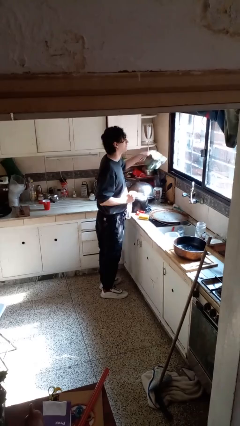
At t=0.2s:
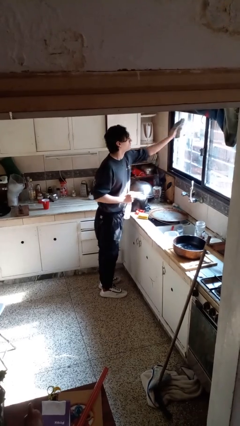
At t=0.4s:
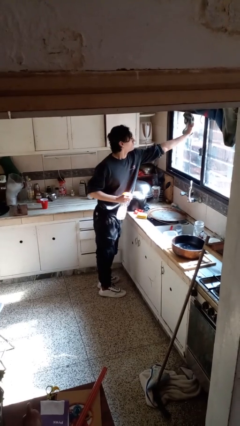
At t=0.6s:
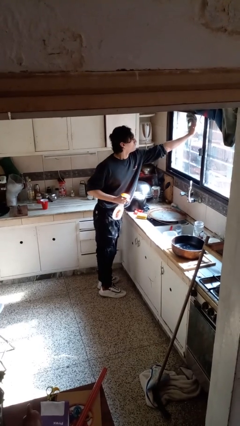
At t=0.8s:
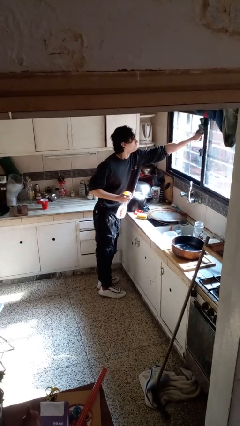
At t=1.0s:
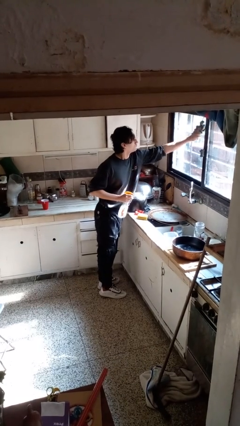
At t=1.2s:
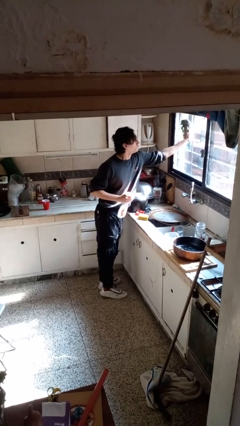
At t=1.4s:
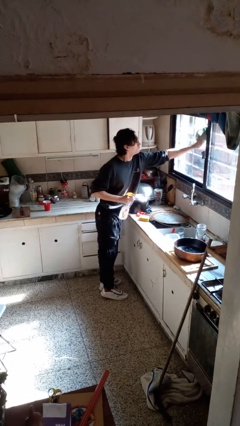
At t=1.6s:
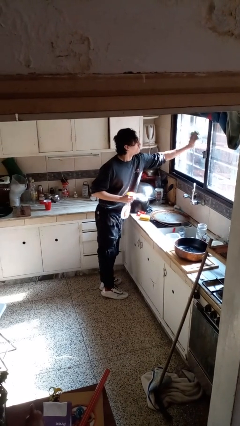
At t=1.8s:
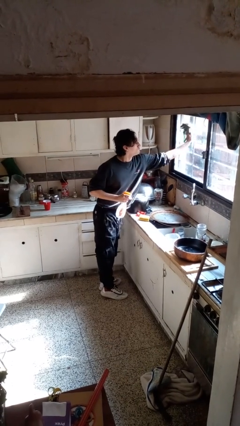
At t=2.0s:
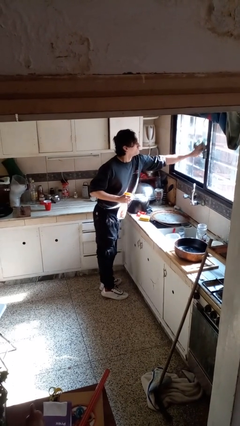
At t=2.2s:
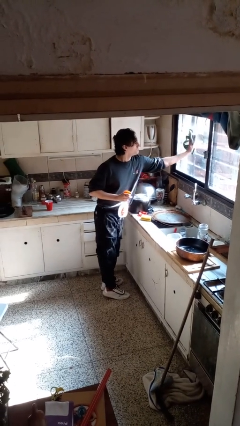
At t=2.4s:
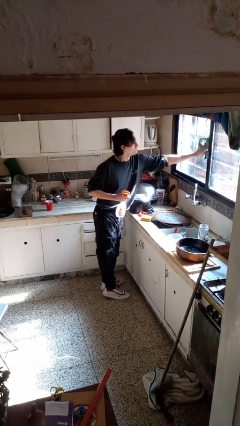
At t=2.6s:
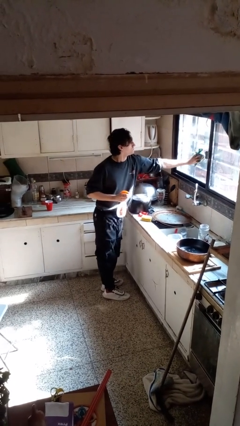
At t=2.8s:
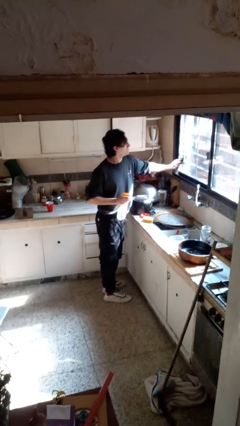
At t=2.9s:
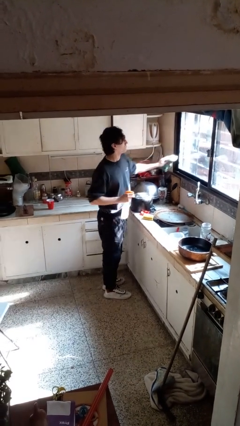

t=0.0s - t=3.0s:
person washes window

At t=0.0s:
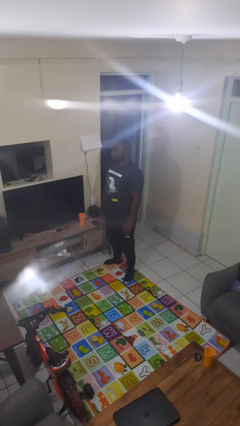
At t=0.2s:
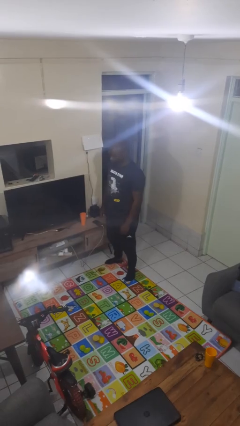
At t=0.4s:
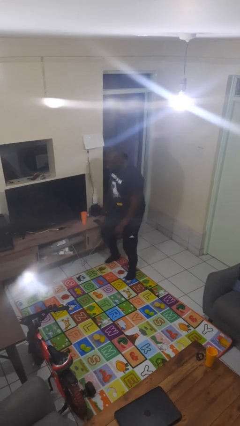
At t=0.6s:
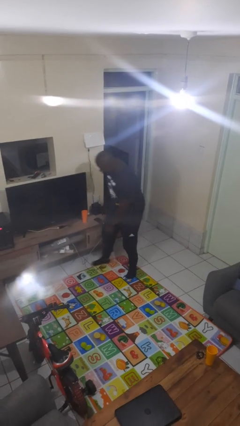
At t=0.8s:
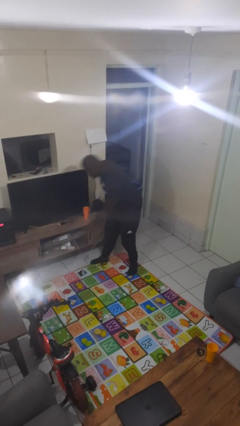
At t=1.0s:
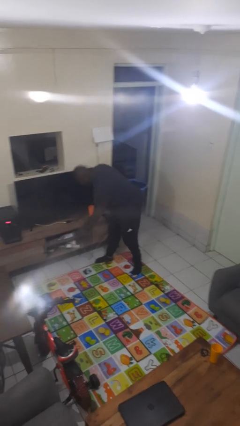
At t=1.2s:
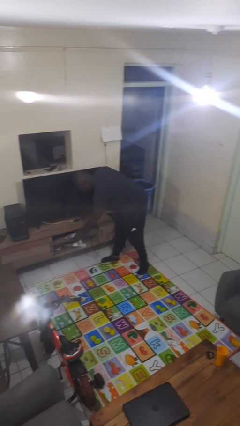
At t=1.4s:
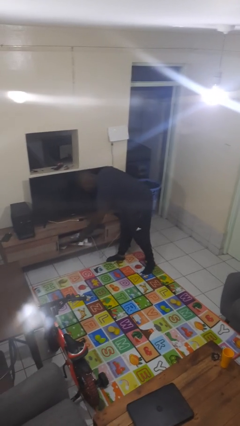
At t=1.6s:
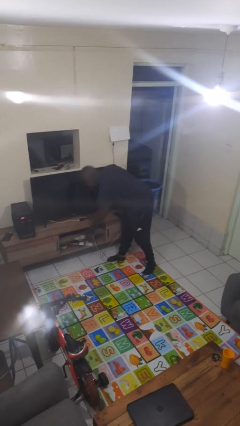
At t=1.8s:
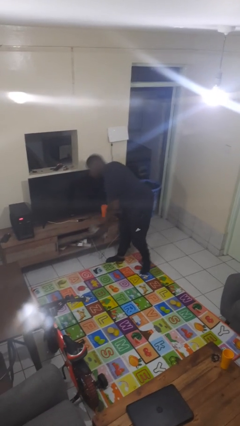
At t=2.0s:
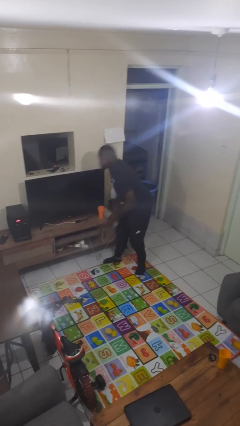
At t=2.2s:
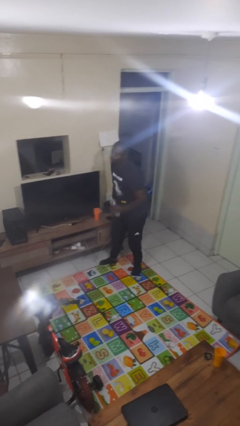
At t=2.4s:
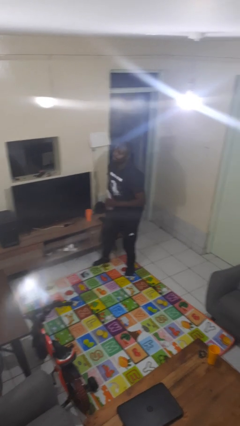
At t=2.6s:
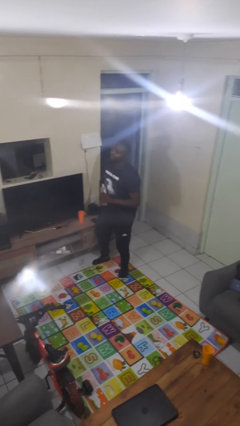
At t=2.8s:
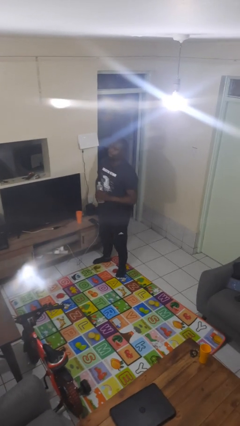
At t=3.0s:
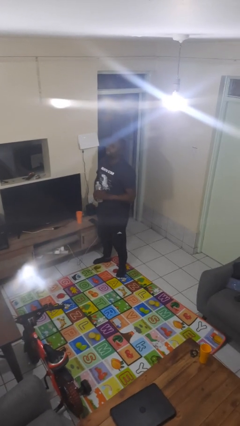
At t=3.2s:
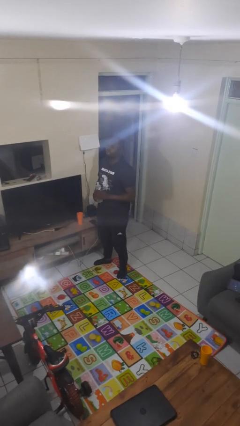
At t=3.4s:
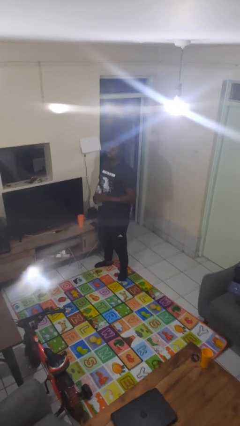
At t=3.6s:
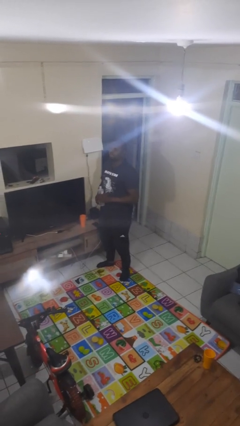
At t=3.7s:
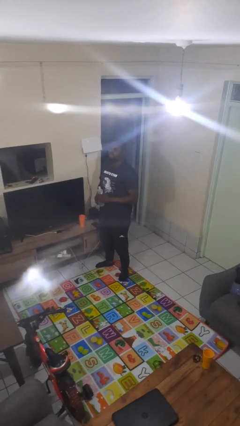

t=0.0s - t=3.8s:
person picks up object from cabinet

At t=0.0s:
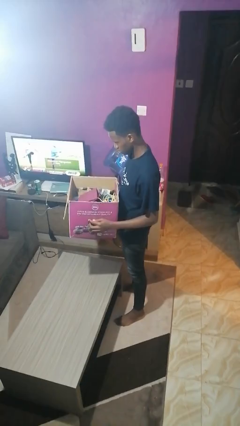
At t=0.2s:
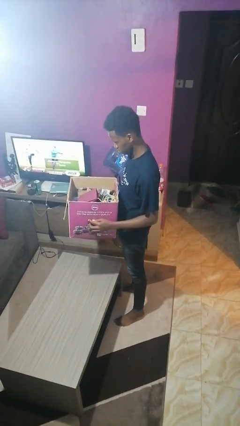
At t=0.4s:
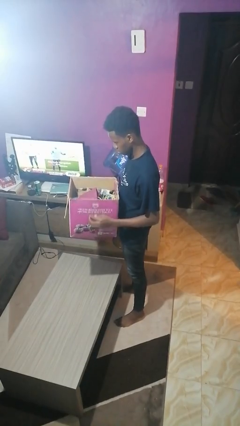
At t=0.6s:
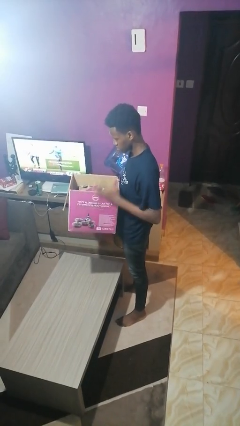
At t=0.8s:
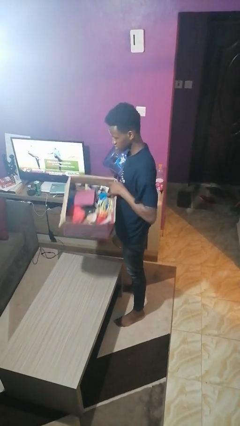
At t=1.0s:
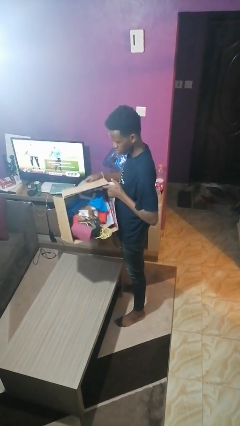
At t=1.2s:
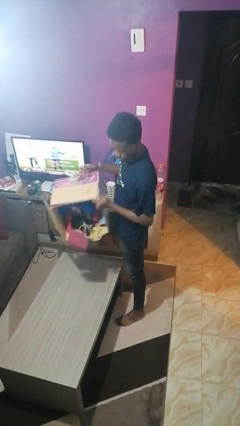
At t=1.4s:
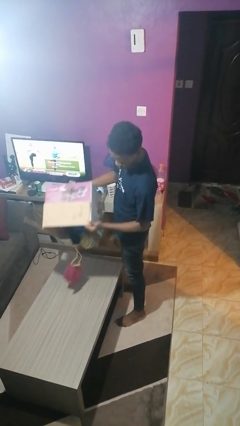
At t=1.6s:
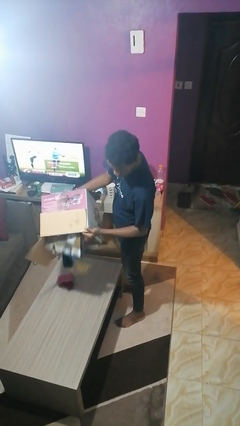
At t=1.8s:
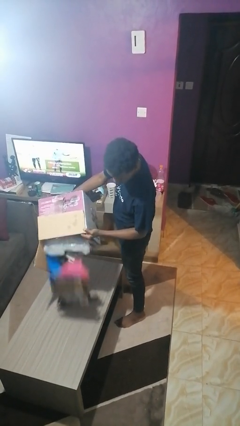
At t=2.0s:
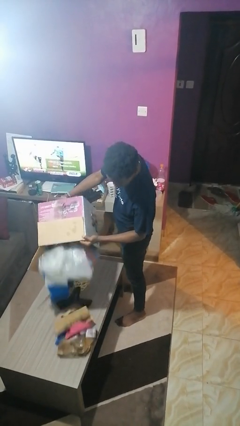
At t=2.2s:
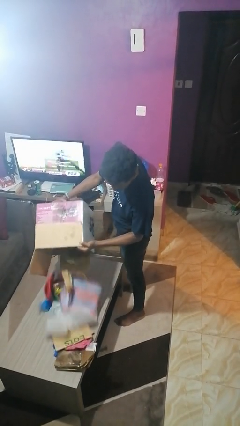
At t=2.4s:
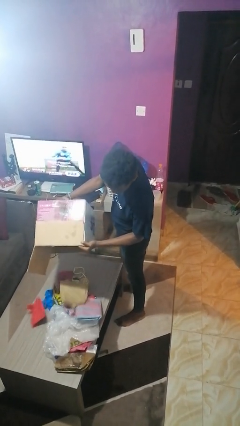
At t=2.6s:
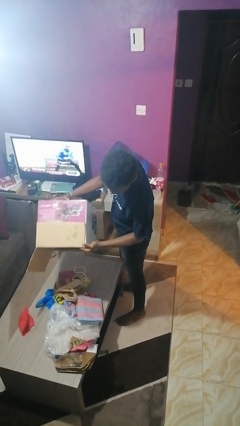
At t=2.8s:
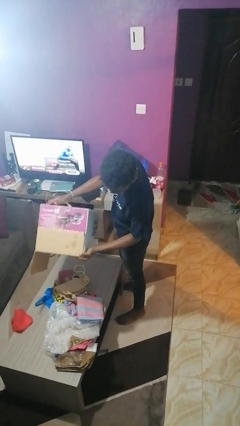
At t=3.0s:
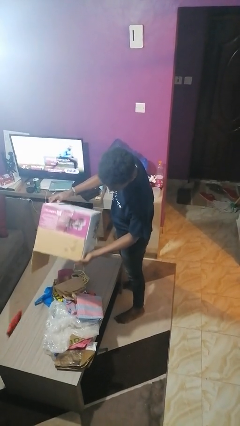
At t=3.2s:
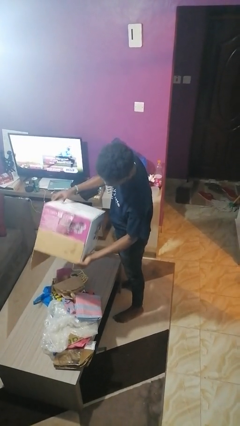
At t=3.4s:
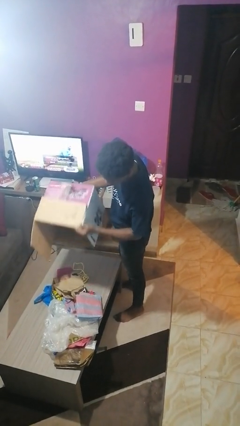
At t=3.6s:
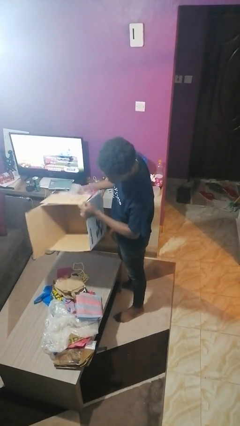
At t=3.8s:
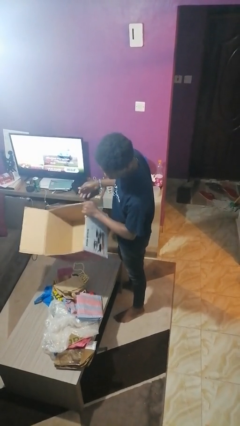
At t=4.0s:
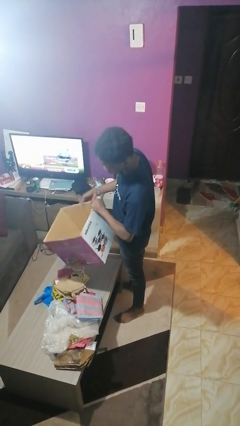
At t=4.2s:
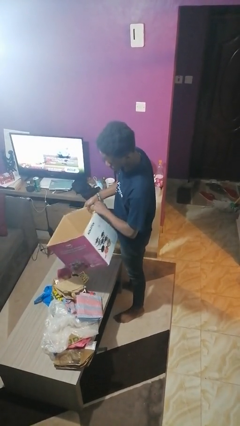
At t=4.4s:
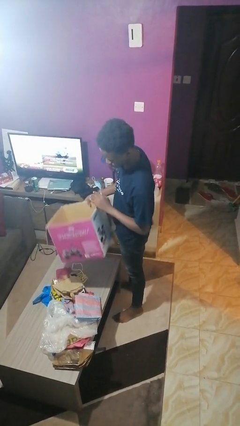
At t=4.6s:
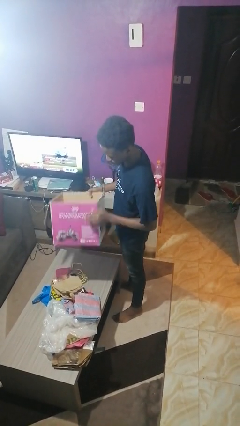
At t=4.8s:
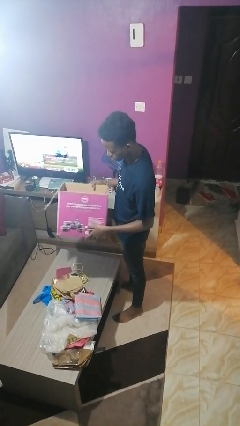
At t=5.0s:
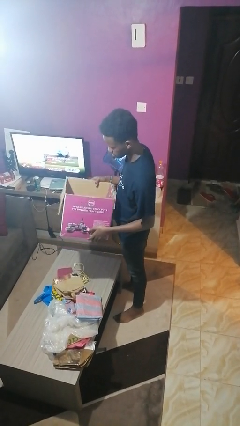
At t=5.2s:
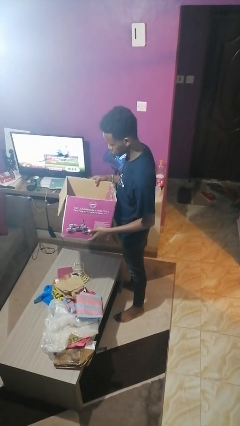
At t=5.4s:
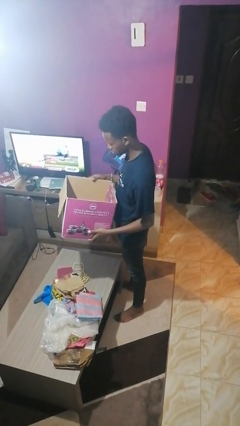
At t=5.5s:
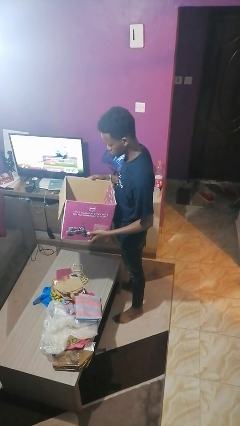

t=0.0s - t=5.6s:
person unloads box onto table

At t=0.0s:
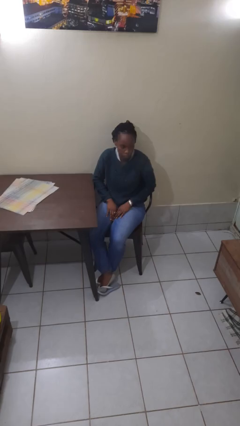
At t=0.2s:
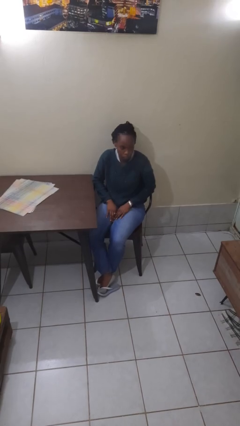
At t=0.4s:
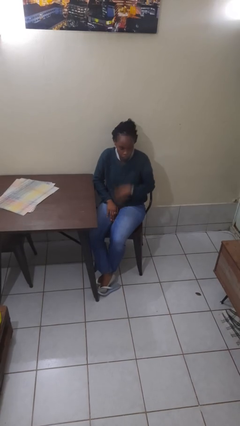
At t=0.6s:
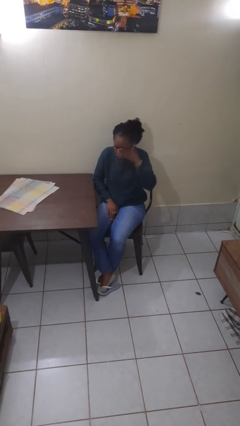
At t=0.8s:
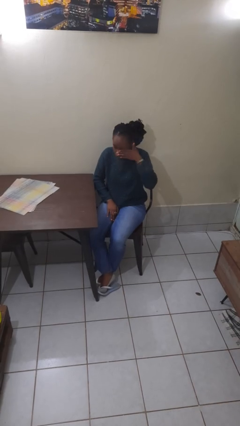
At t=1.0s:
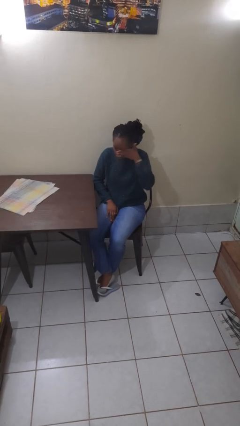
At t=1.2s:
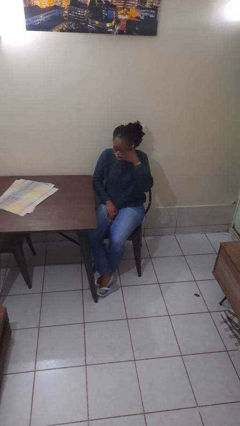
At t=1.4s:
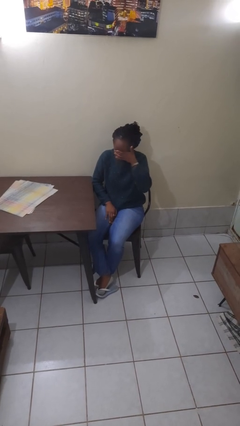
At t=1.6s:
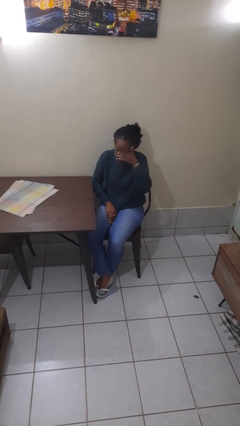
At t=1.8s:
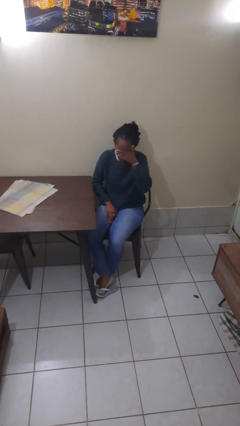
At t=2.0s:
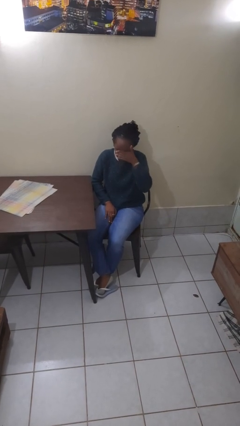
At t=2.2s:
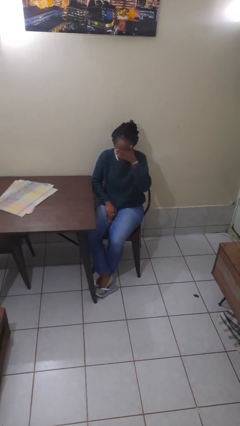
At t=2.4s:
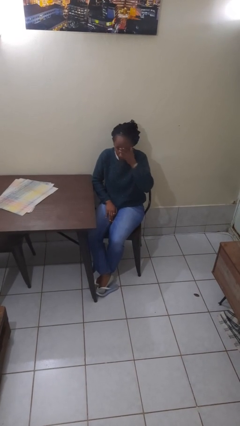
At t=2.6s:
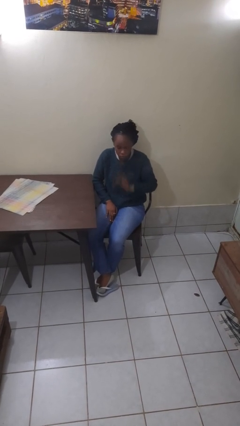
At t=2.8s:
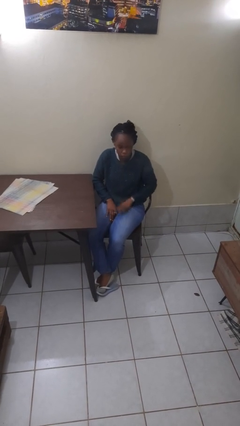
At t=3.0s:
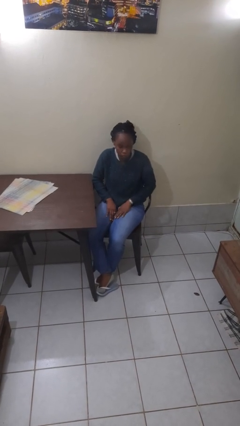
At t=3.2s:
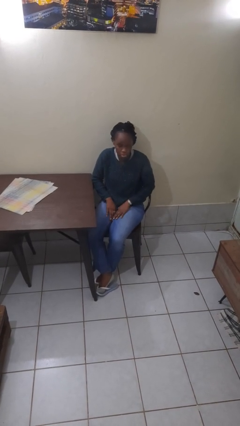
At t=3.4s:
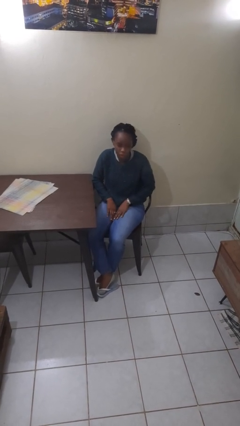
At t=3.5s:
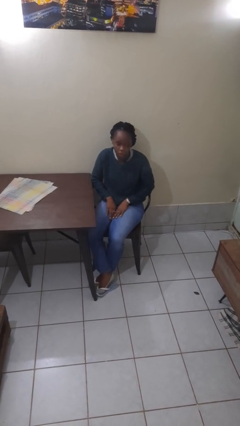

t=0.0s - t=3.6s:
person rubs eyes

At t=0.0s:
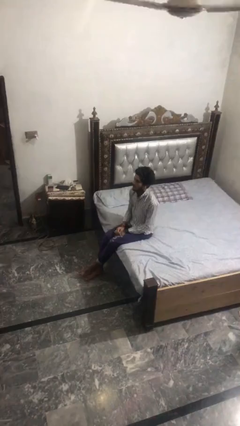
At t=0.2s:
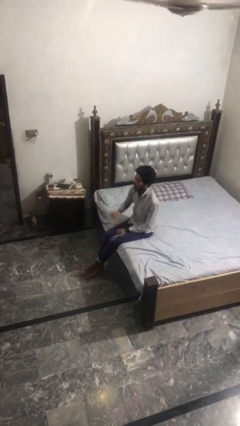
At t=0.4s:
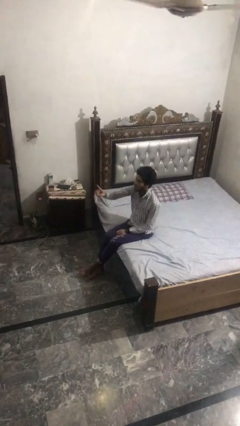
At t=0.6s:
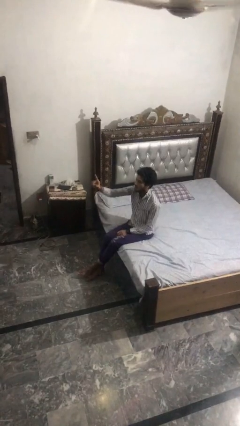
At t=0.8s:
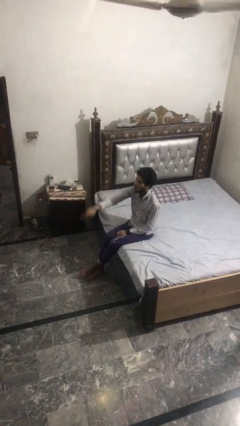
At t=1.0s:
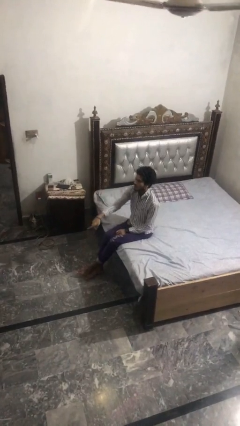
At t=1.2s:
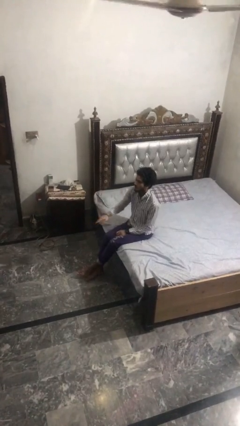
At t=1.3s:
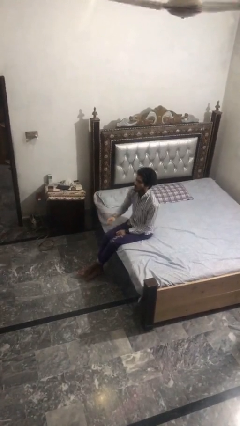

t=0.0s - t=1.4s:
person gestures swipe down
